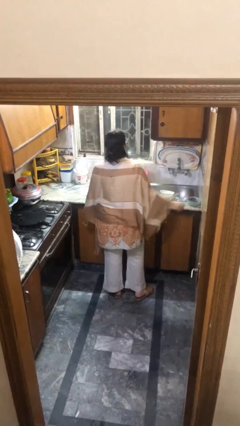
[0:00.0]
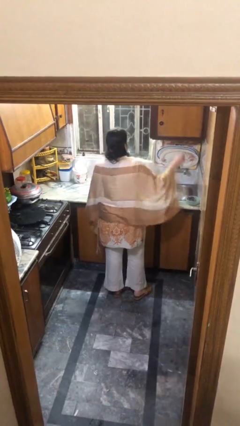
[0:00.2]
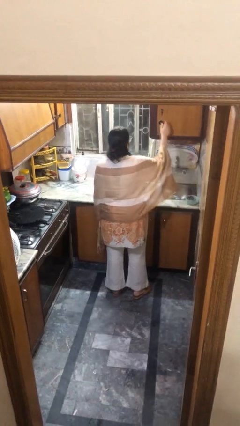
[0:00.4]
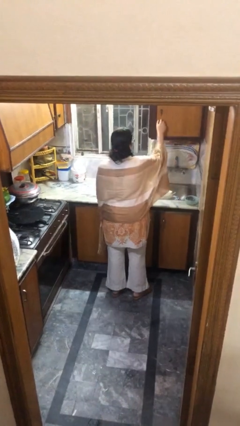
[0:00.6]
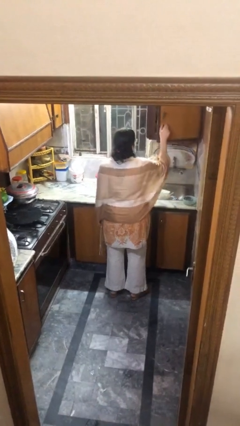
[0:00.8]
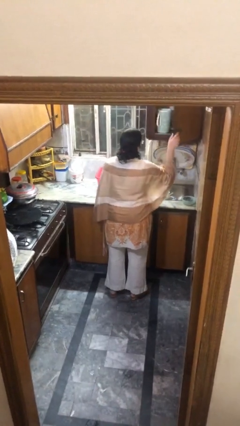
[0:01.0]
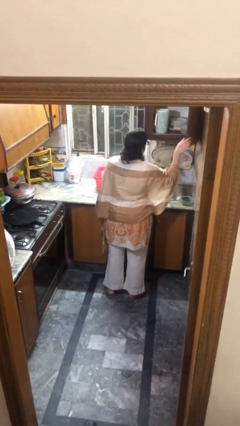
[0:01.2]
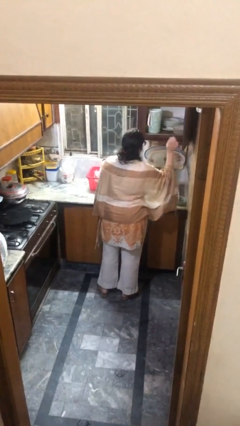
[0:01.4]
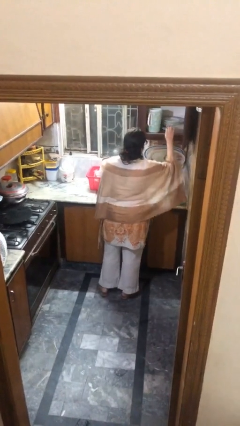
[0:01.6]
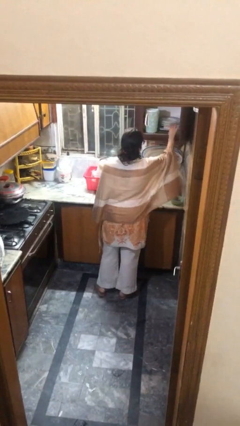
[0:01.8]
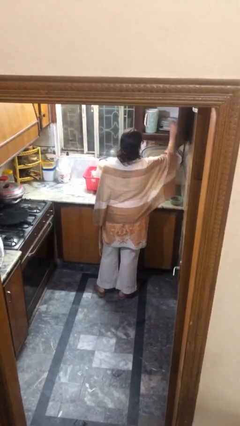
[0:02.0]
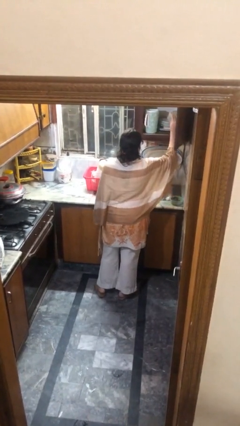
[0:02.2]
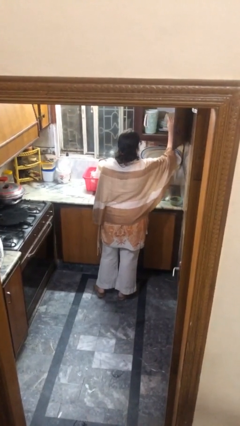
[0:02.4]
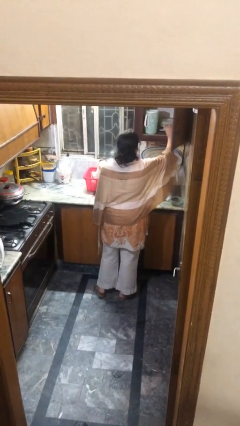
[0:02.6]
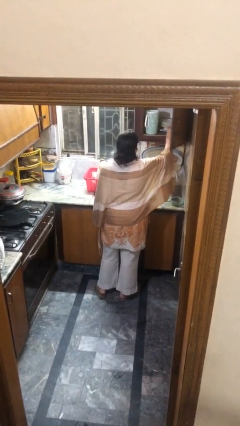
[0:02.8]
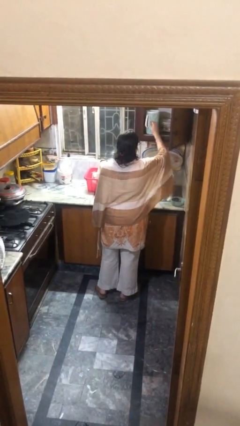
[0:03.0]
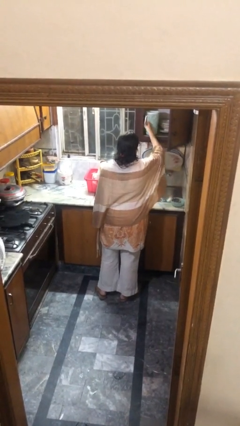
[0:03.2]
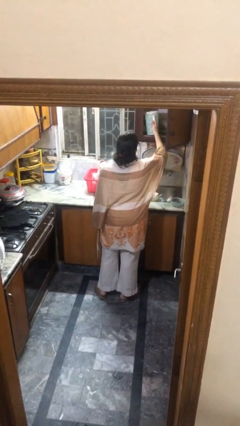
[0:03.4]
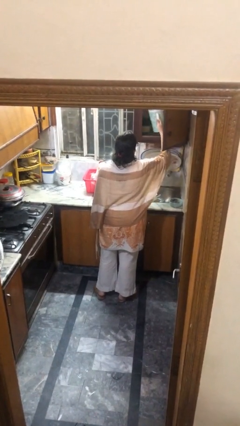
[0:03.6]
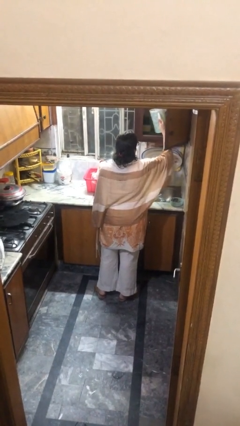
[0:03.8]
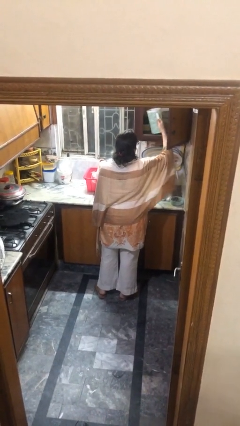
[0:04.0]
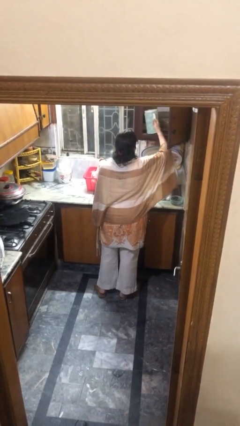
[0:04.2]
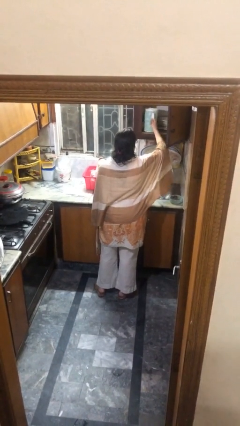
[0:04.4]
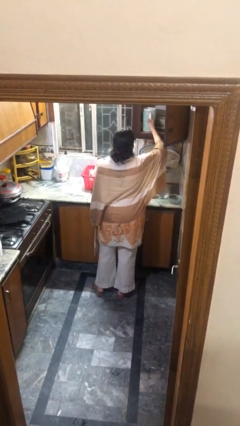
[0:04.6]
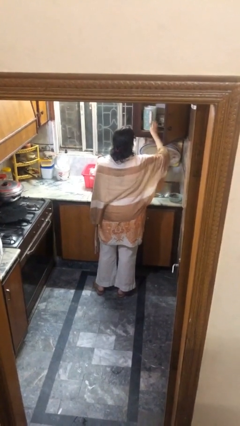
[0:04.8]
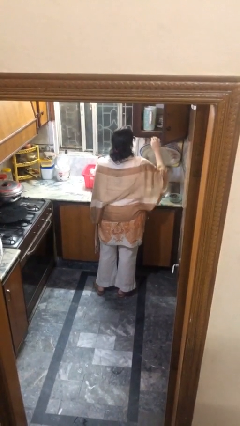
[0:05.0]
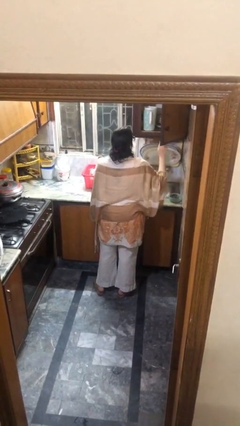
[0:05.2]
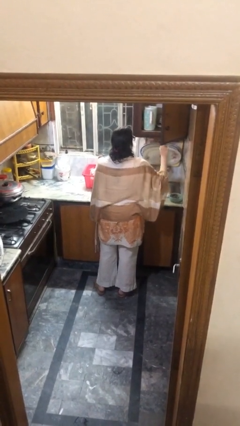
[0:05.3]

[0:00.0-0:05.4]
person searches in kitchen drawer

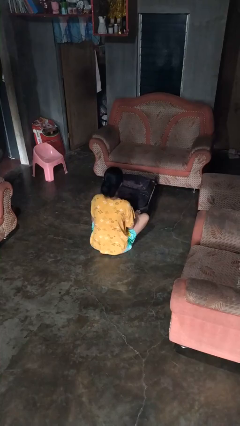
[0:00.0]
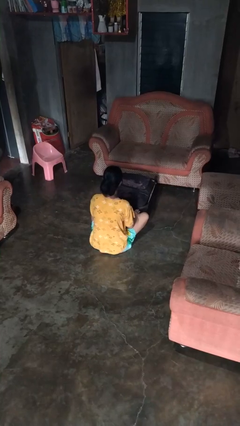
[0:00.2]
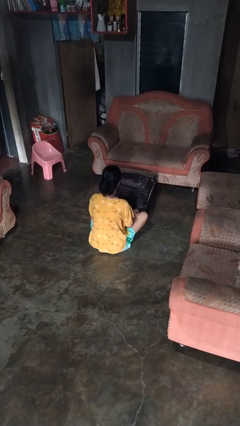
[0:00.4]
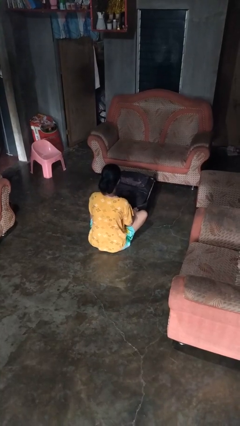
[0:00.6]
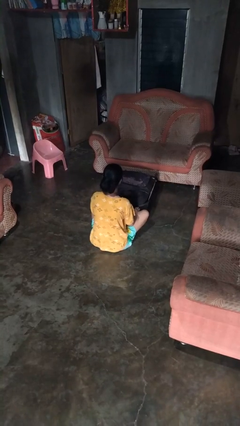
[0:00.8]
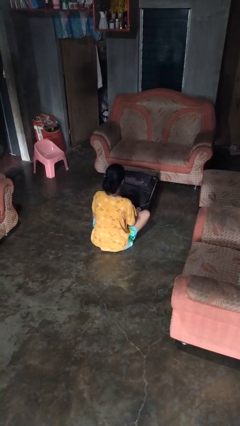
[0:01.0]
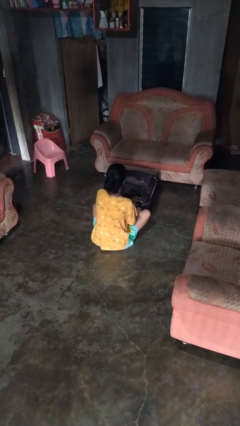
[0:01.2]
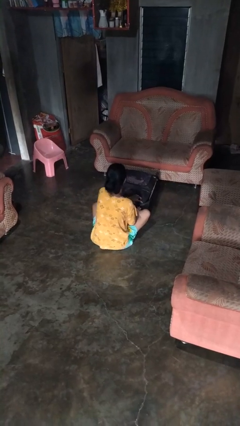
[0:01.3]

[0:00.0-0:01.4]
person opens suitcase

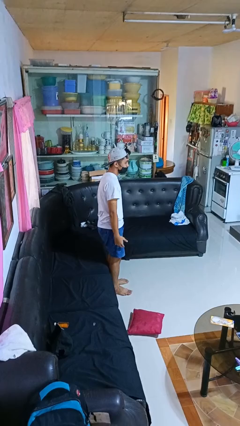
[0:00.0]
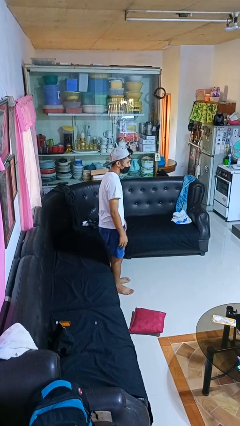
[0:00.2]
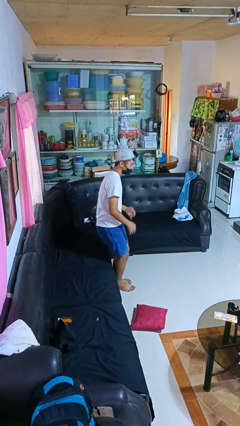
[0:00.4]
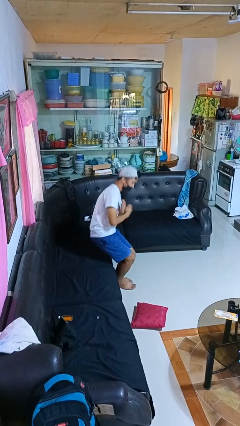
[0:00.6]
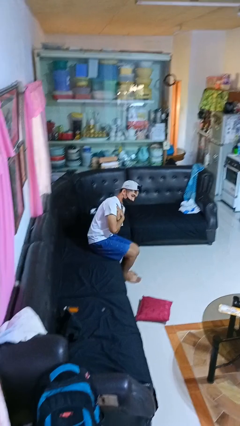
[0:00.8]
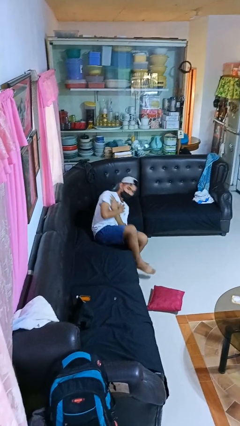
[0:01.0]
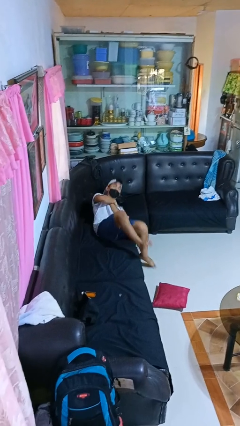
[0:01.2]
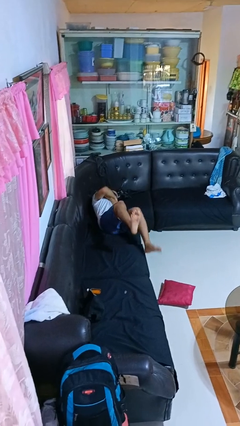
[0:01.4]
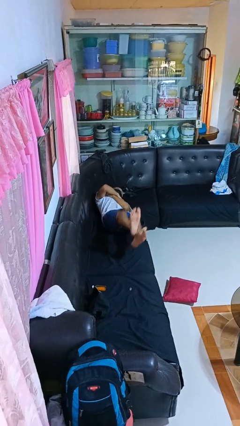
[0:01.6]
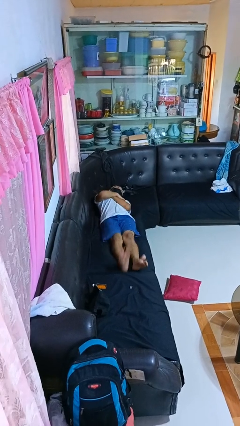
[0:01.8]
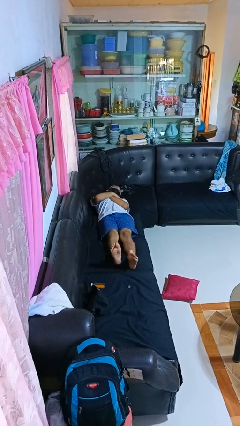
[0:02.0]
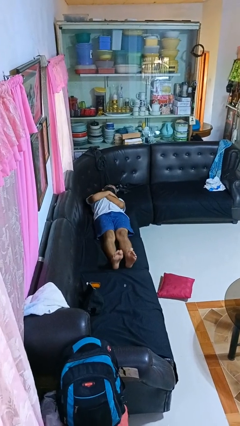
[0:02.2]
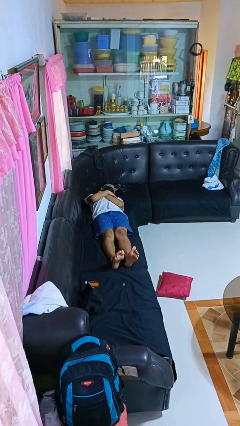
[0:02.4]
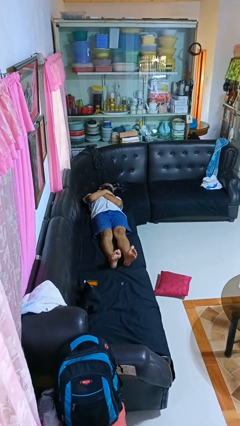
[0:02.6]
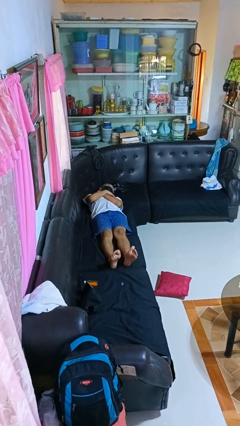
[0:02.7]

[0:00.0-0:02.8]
person lies down on couch

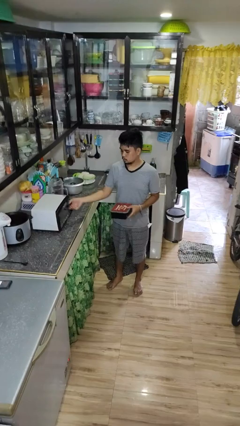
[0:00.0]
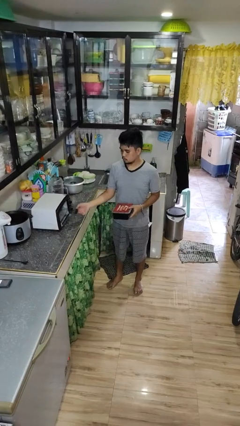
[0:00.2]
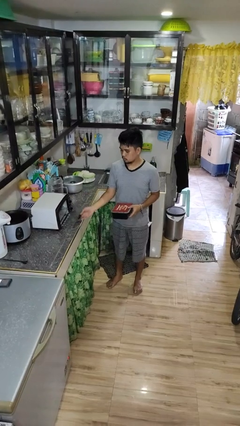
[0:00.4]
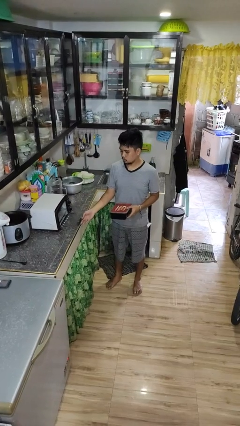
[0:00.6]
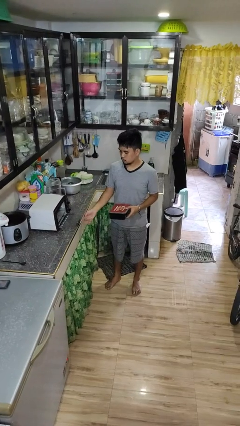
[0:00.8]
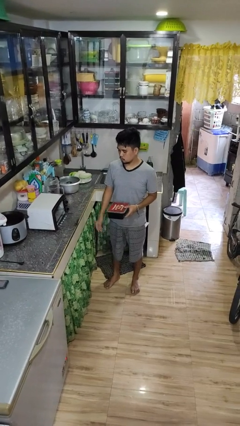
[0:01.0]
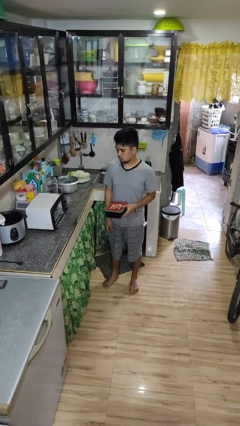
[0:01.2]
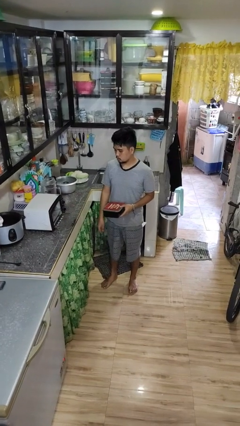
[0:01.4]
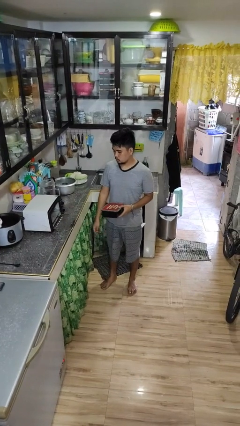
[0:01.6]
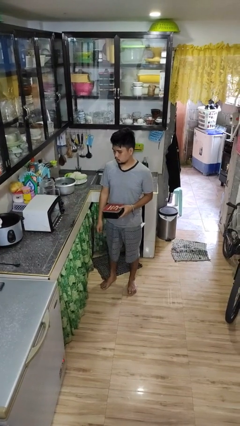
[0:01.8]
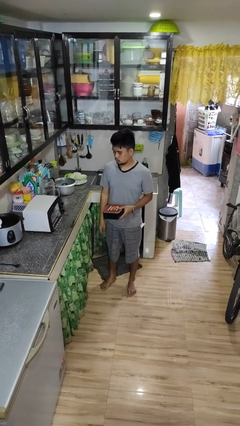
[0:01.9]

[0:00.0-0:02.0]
person opens microwave

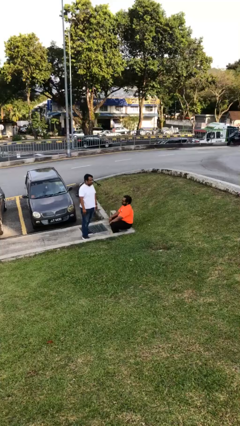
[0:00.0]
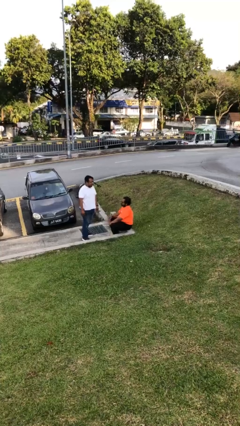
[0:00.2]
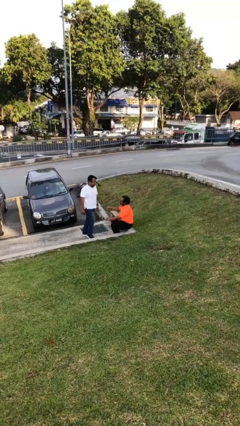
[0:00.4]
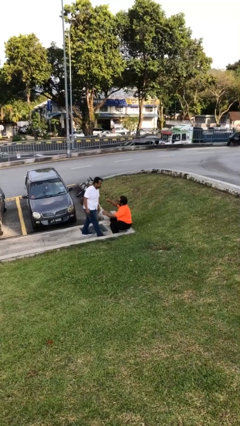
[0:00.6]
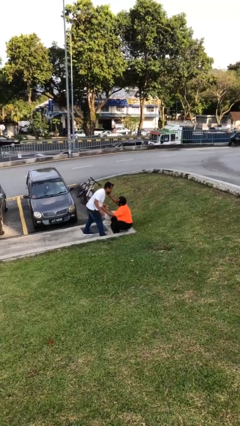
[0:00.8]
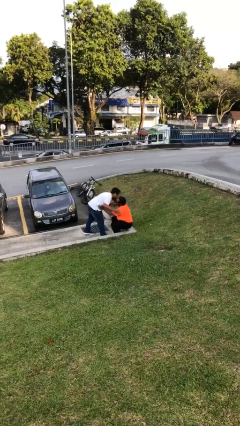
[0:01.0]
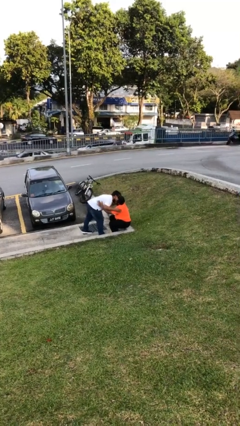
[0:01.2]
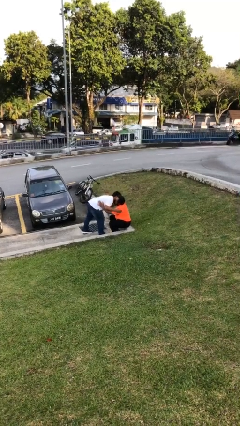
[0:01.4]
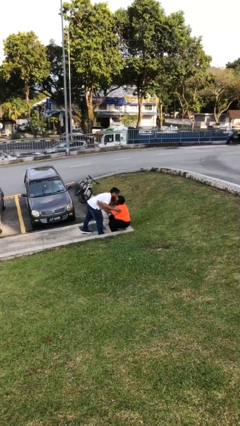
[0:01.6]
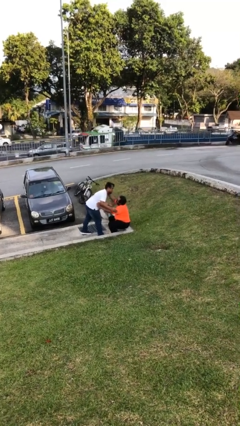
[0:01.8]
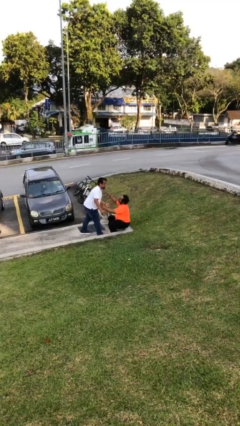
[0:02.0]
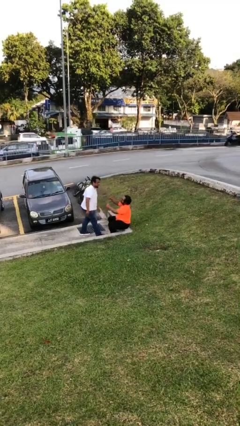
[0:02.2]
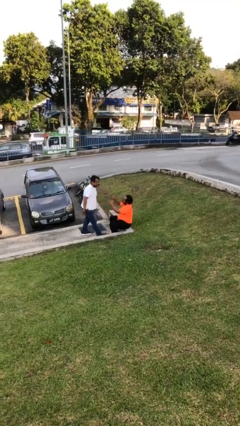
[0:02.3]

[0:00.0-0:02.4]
person embraces person

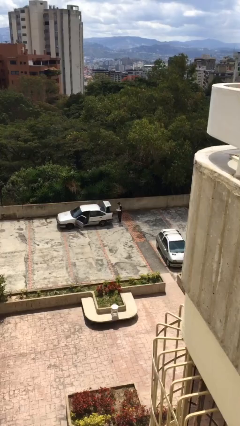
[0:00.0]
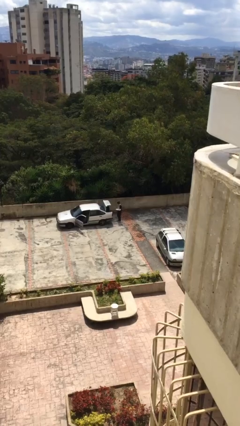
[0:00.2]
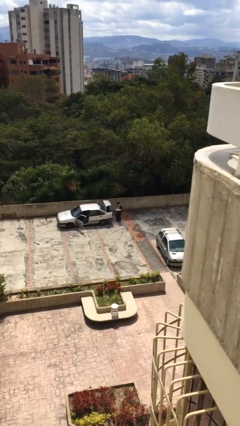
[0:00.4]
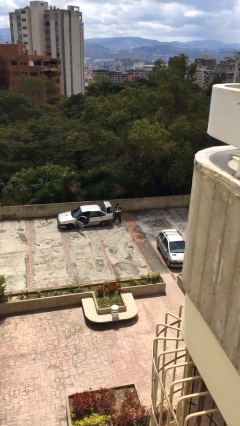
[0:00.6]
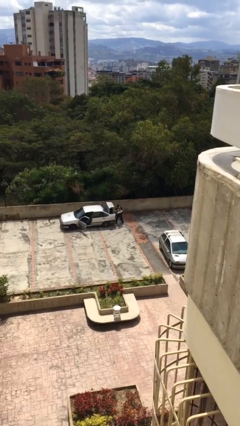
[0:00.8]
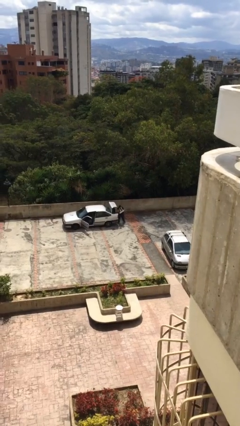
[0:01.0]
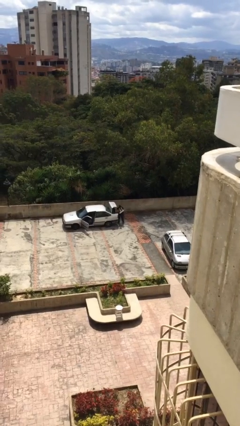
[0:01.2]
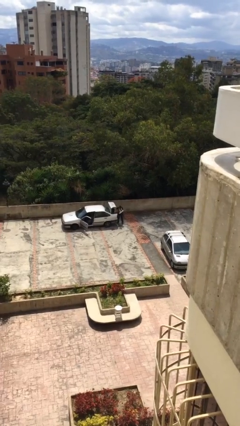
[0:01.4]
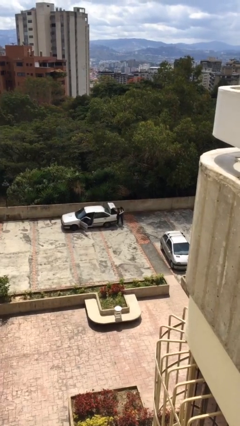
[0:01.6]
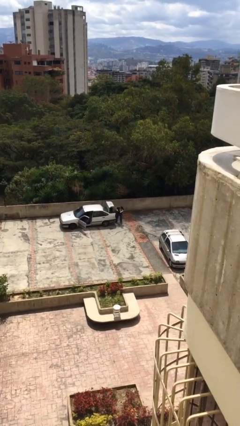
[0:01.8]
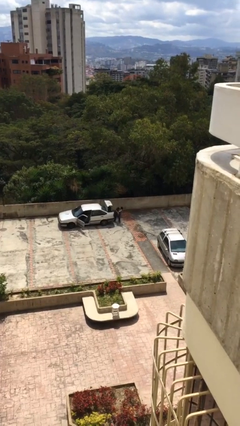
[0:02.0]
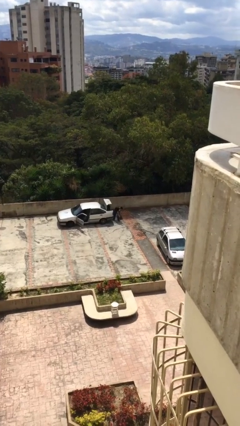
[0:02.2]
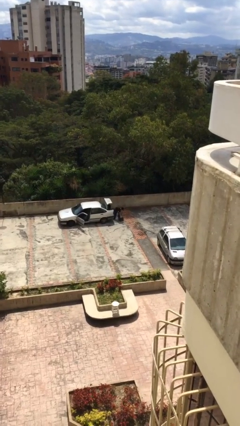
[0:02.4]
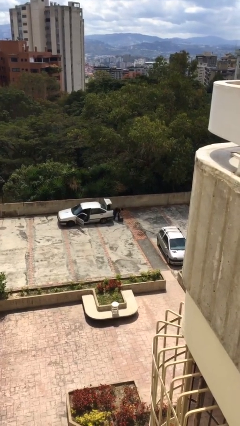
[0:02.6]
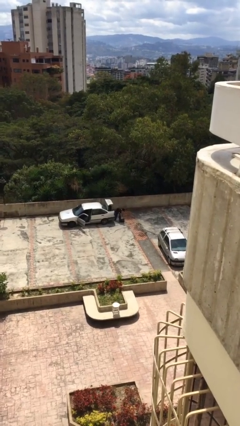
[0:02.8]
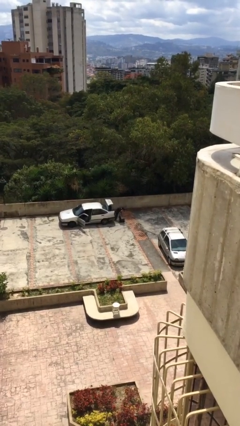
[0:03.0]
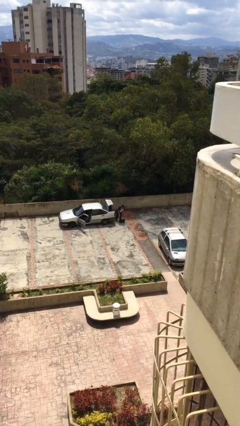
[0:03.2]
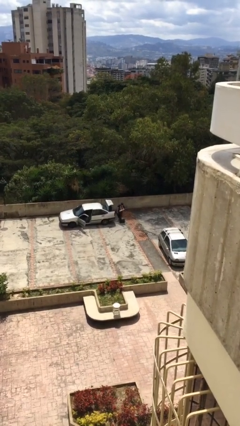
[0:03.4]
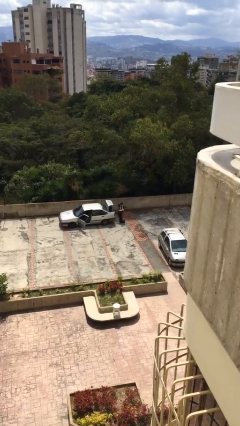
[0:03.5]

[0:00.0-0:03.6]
person unloads car

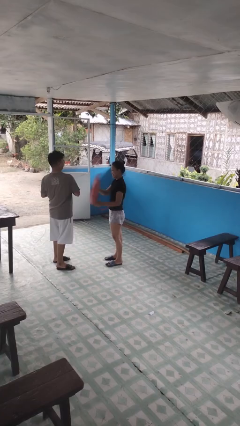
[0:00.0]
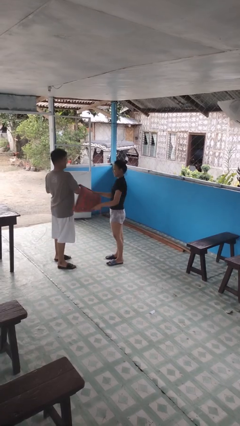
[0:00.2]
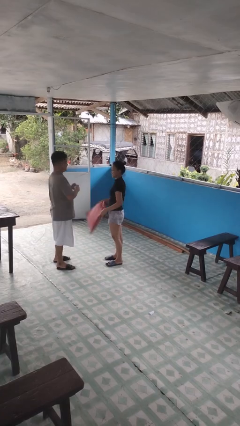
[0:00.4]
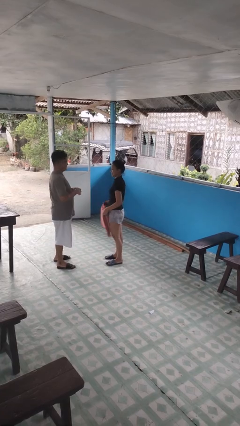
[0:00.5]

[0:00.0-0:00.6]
person hits person with pillow
